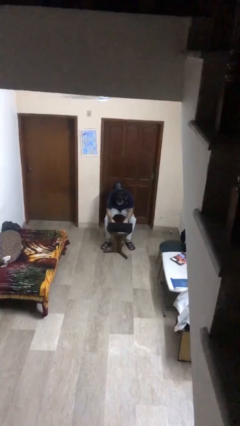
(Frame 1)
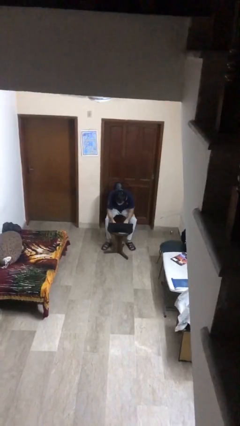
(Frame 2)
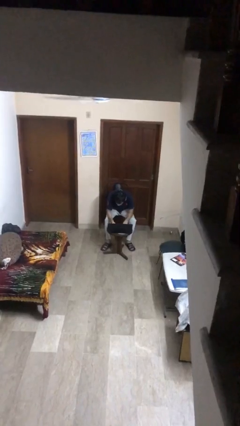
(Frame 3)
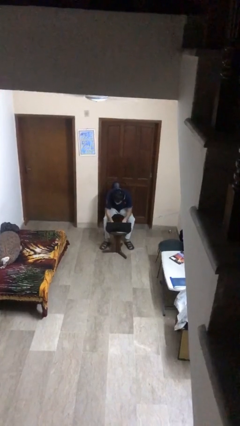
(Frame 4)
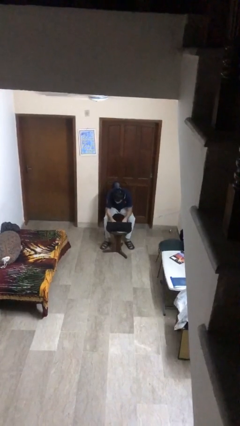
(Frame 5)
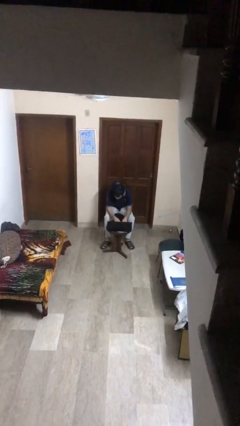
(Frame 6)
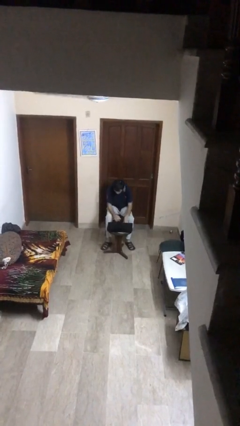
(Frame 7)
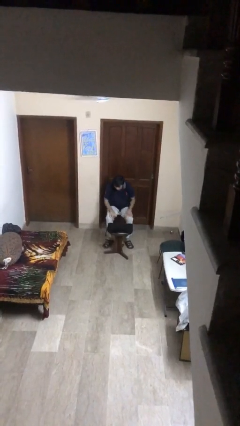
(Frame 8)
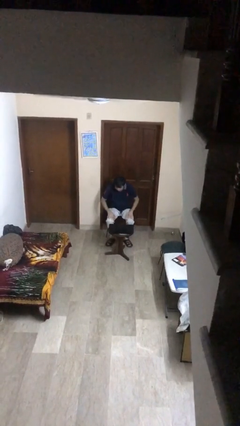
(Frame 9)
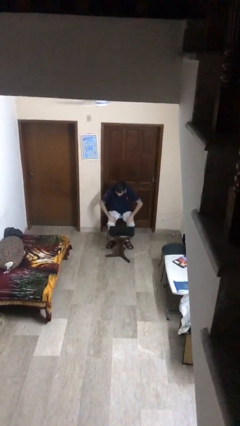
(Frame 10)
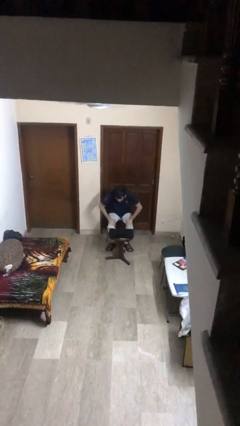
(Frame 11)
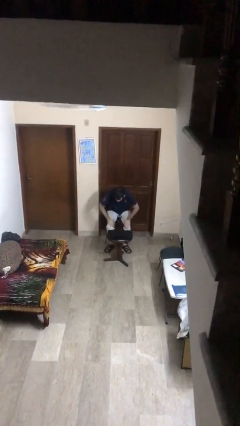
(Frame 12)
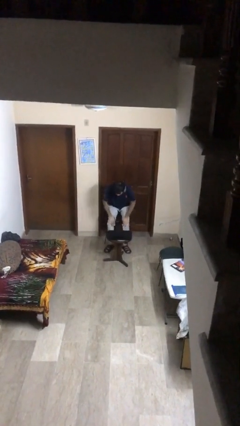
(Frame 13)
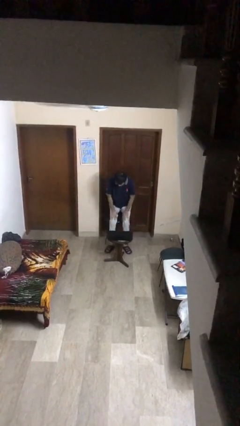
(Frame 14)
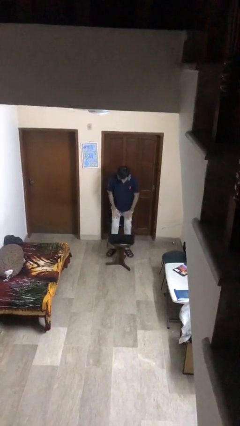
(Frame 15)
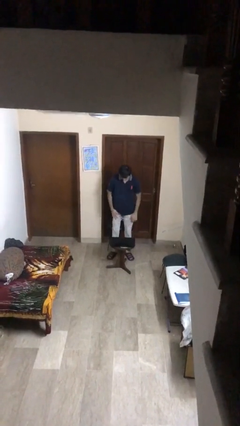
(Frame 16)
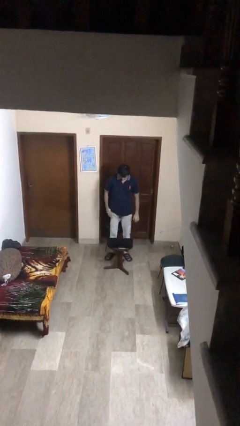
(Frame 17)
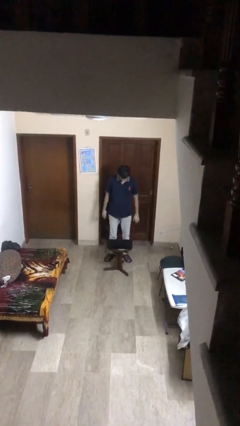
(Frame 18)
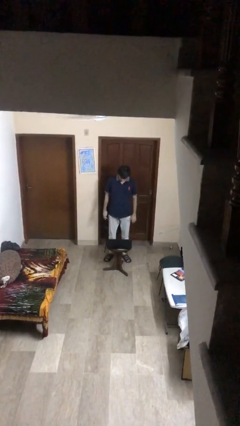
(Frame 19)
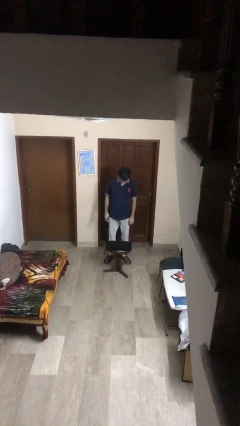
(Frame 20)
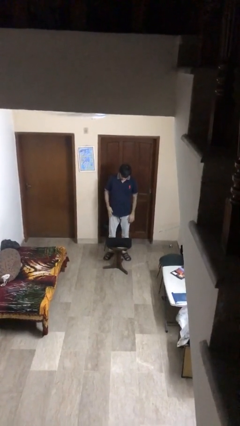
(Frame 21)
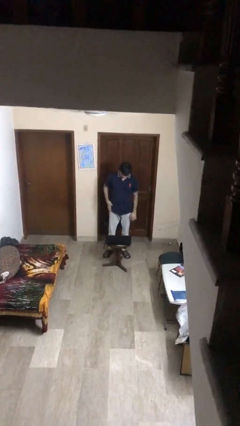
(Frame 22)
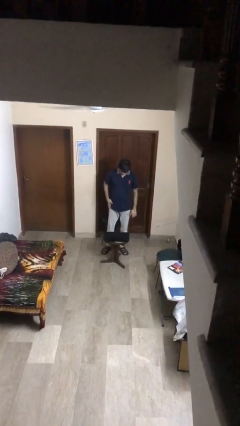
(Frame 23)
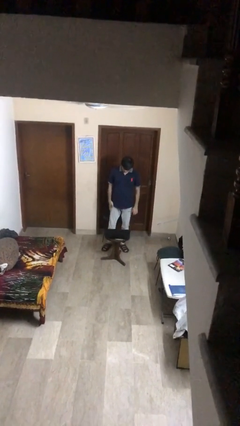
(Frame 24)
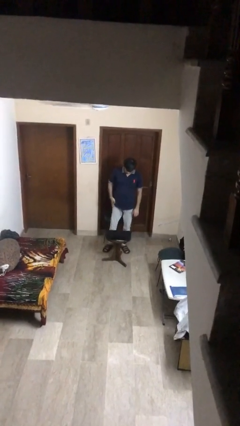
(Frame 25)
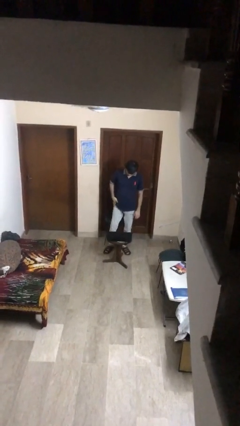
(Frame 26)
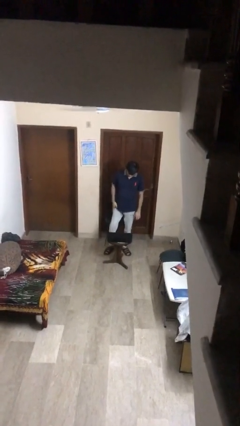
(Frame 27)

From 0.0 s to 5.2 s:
person stands up

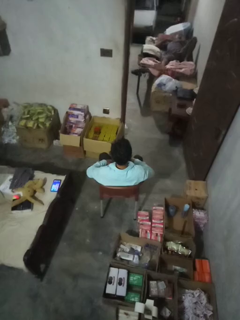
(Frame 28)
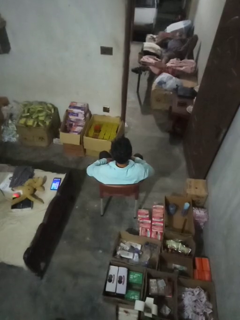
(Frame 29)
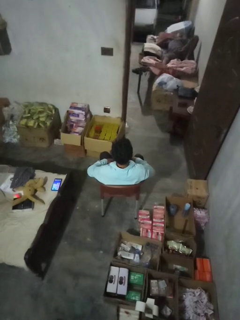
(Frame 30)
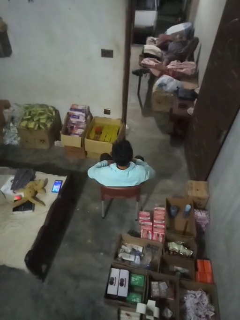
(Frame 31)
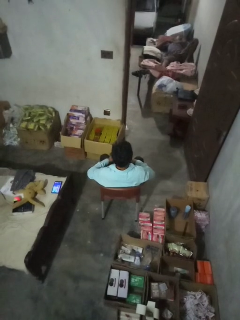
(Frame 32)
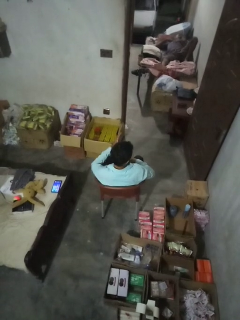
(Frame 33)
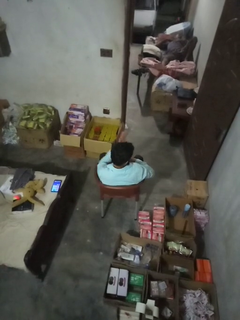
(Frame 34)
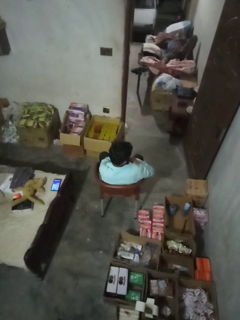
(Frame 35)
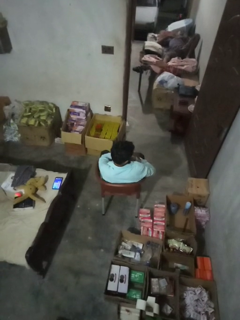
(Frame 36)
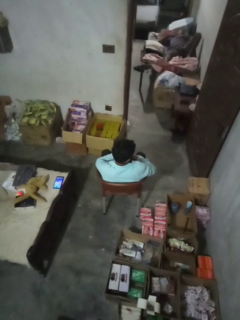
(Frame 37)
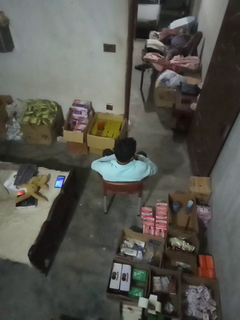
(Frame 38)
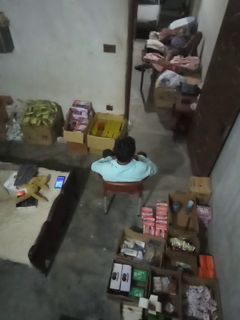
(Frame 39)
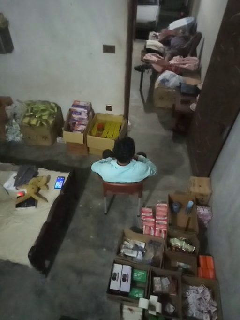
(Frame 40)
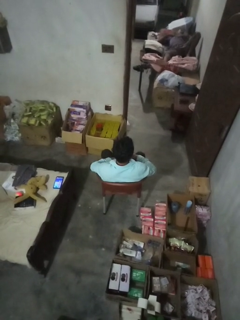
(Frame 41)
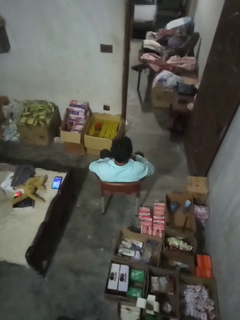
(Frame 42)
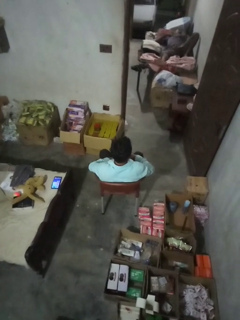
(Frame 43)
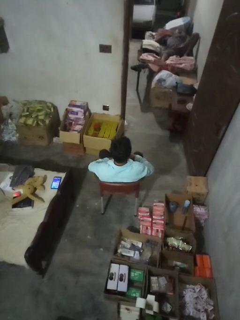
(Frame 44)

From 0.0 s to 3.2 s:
person swats bug

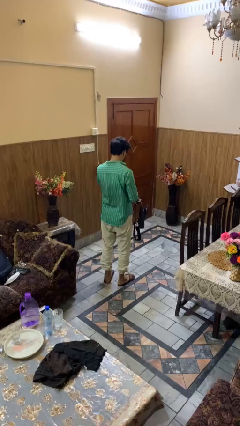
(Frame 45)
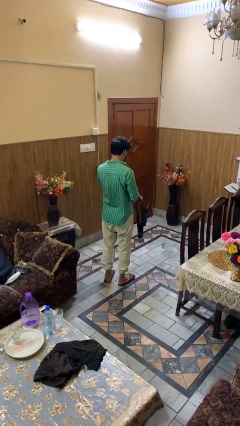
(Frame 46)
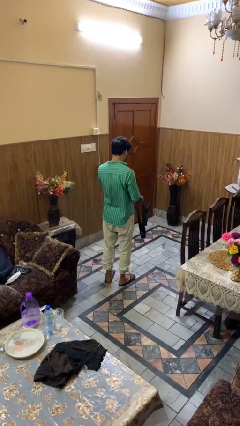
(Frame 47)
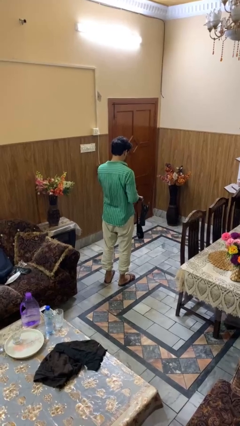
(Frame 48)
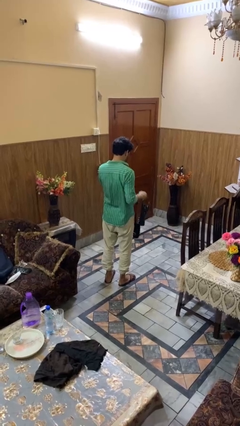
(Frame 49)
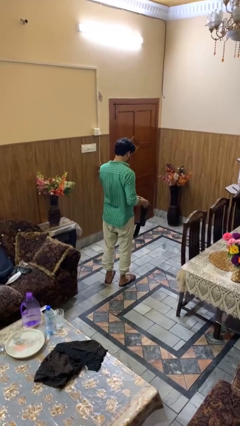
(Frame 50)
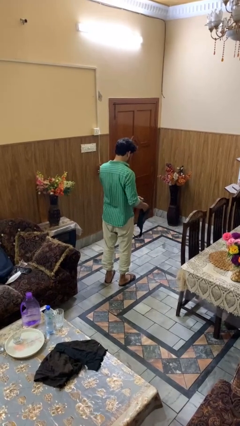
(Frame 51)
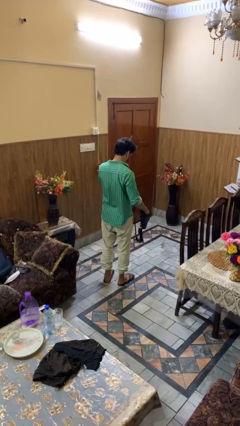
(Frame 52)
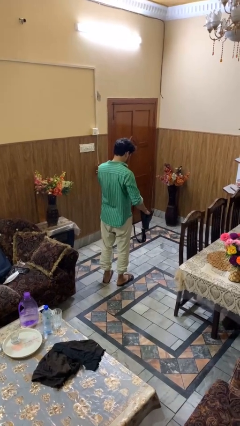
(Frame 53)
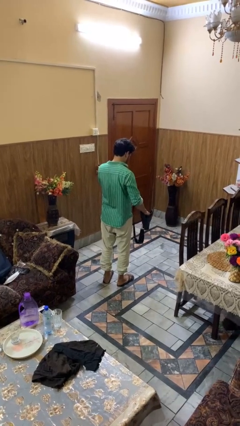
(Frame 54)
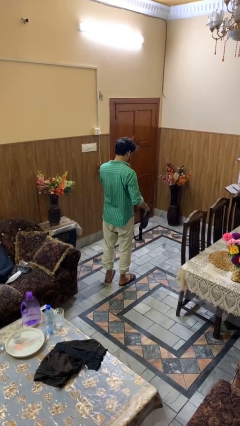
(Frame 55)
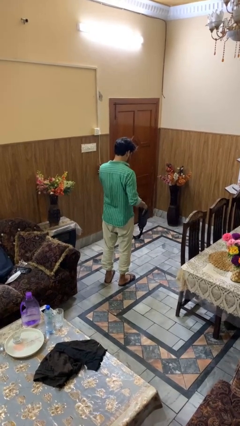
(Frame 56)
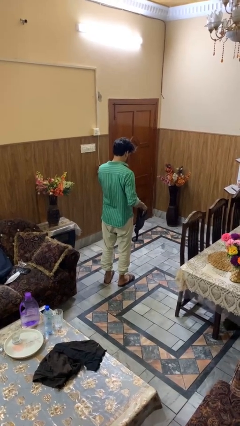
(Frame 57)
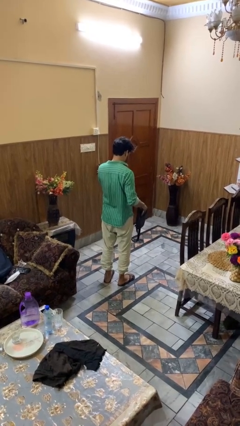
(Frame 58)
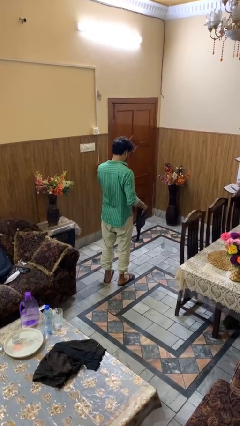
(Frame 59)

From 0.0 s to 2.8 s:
person searches in purse

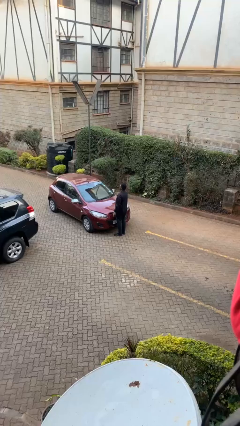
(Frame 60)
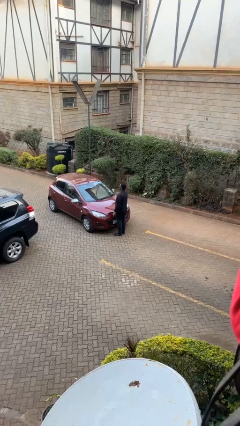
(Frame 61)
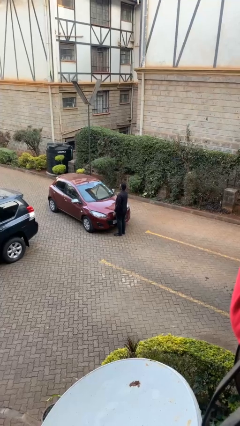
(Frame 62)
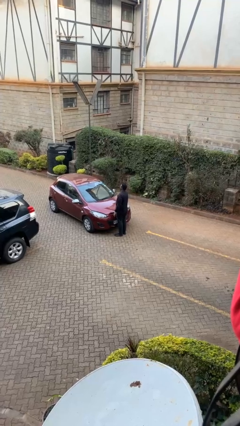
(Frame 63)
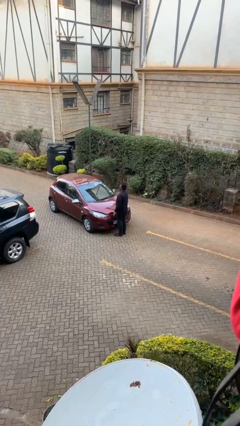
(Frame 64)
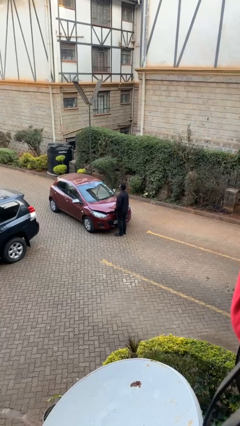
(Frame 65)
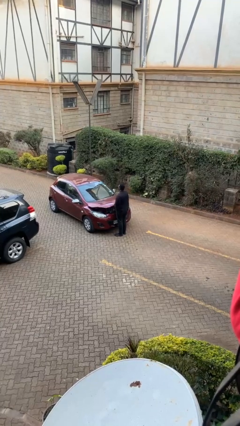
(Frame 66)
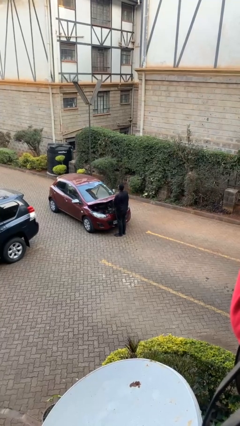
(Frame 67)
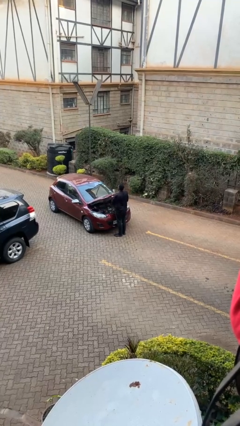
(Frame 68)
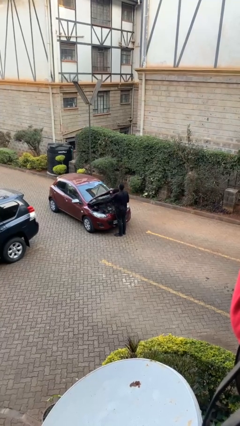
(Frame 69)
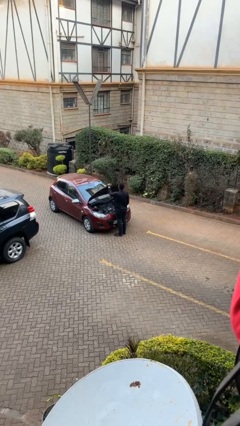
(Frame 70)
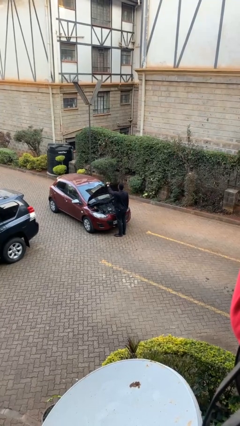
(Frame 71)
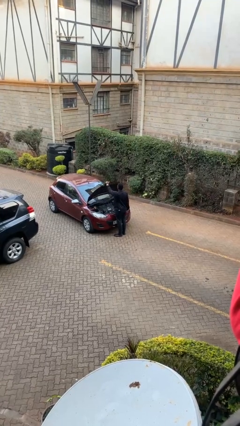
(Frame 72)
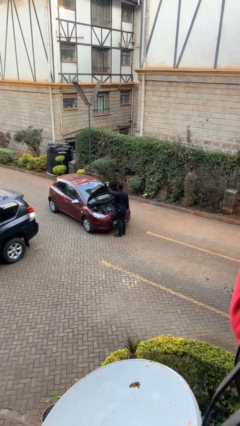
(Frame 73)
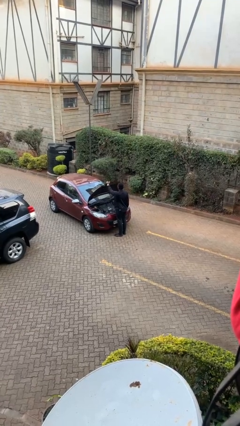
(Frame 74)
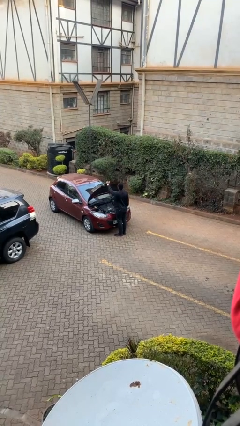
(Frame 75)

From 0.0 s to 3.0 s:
person opens car hood

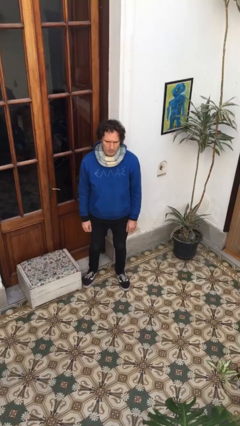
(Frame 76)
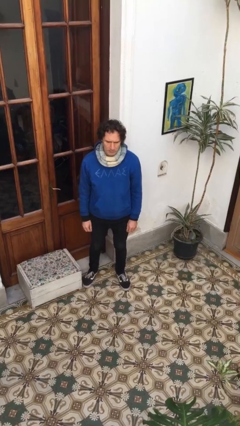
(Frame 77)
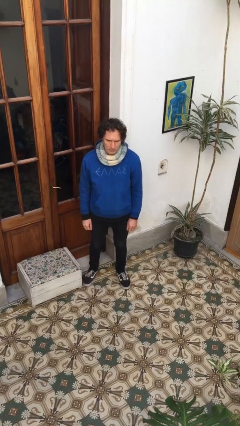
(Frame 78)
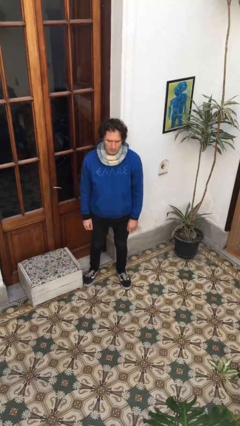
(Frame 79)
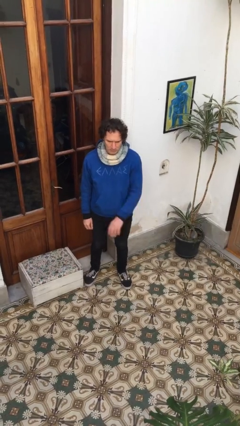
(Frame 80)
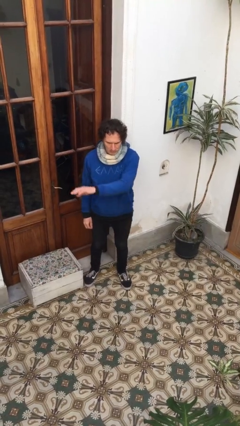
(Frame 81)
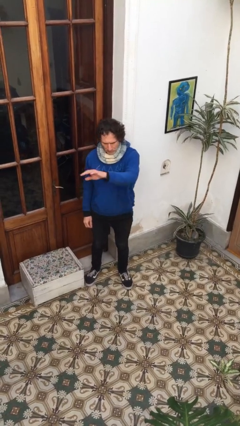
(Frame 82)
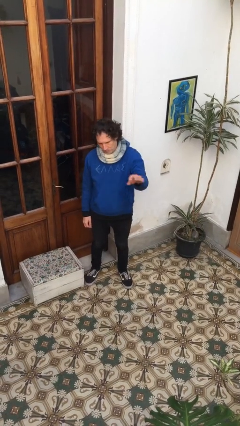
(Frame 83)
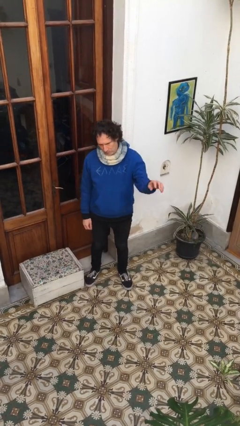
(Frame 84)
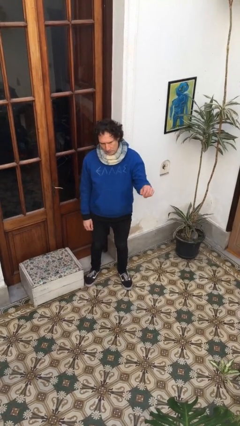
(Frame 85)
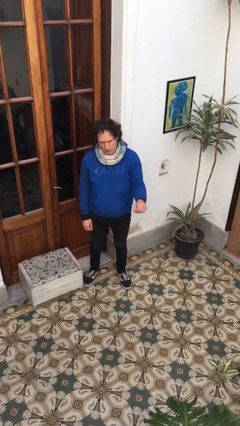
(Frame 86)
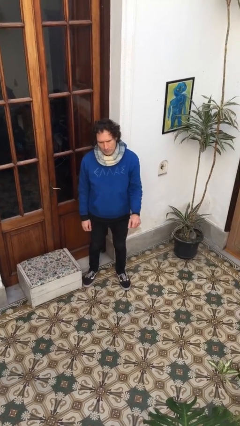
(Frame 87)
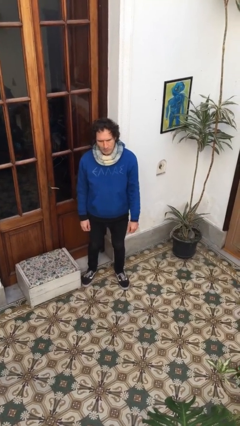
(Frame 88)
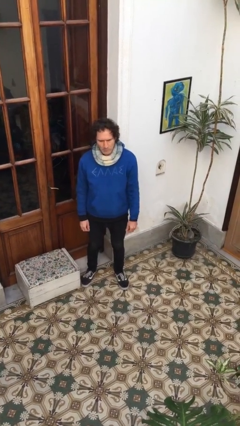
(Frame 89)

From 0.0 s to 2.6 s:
person gestures swipe left

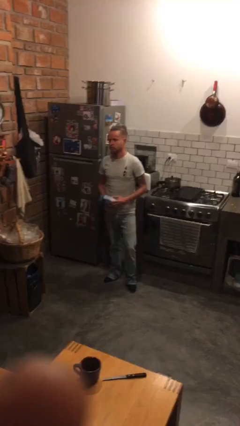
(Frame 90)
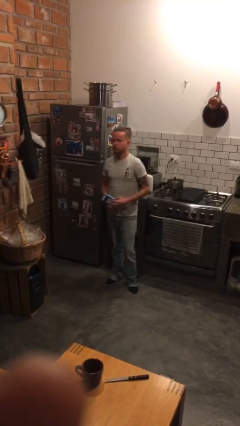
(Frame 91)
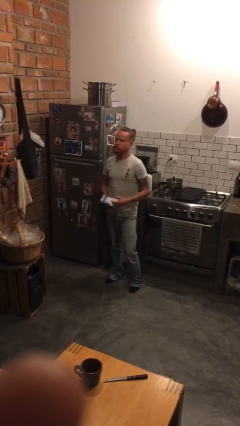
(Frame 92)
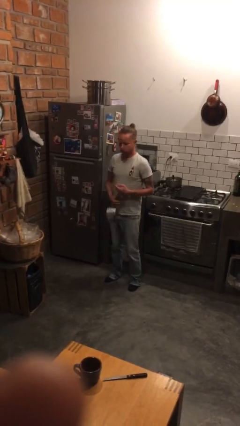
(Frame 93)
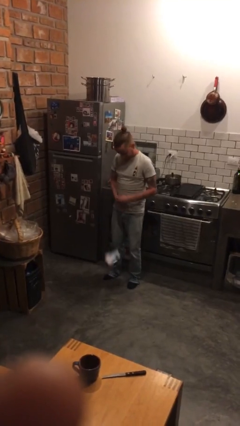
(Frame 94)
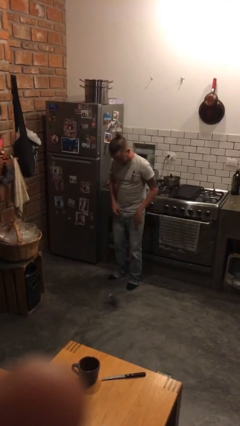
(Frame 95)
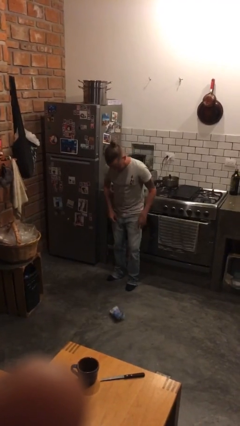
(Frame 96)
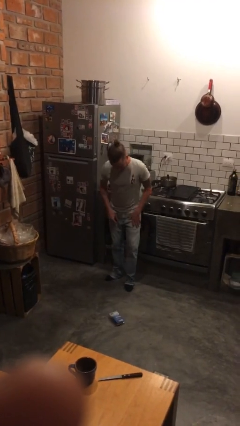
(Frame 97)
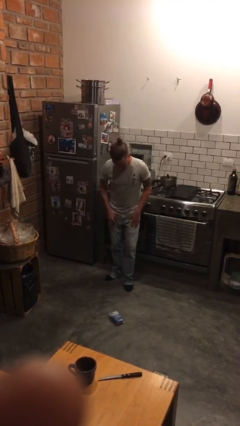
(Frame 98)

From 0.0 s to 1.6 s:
person drops object
